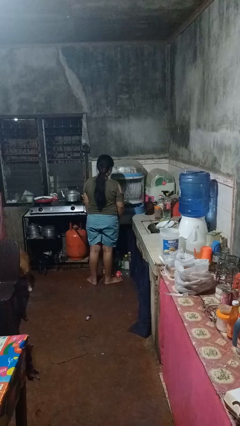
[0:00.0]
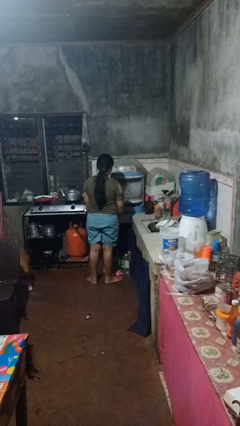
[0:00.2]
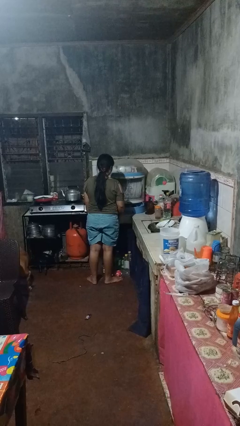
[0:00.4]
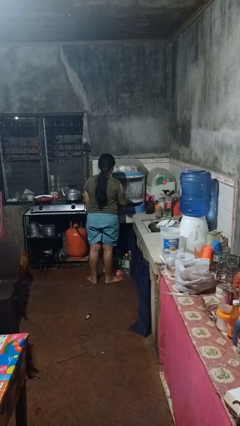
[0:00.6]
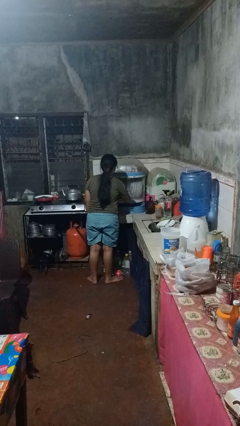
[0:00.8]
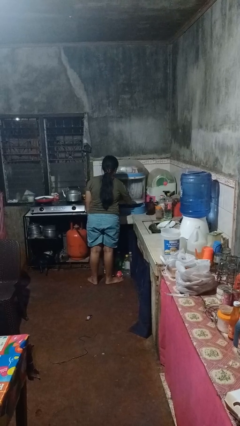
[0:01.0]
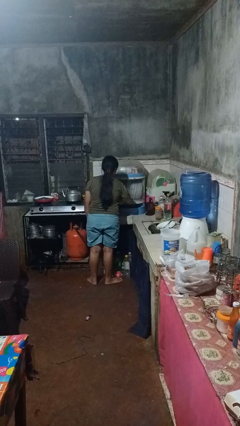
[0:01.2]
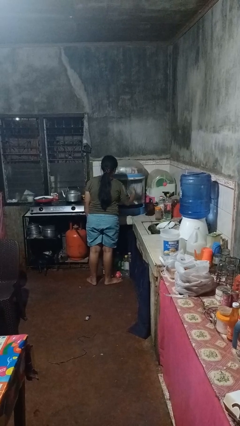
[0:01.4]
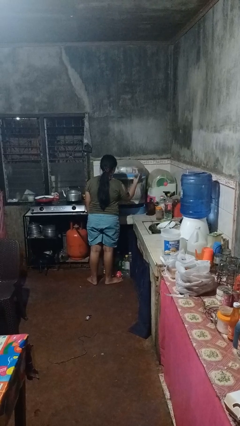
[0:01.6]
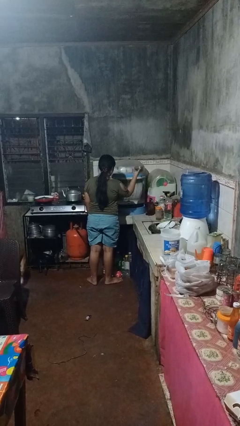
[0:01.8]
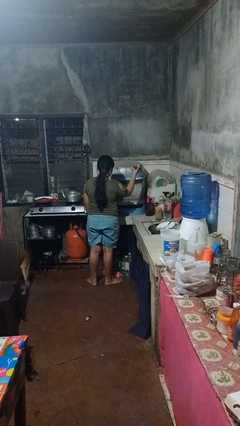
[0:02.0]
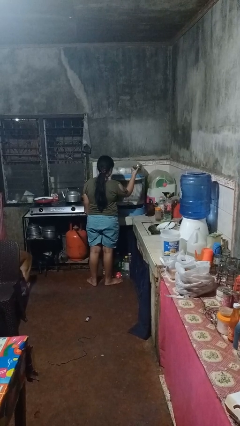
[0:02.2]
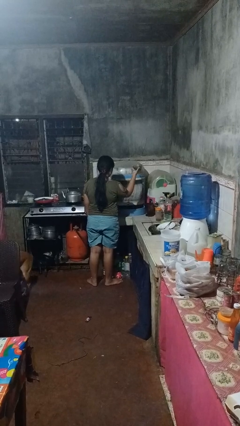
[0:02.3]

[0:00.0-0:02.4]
person takes object from kitchen drawer

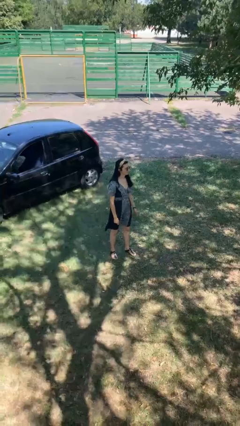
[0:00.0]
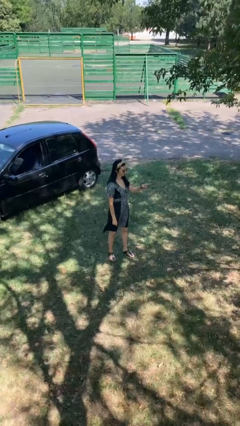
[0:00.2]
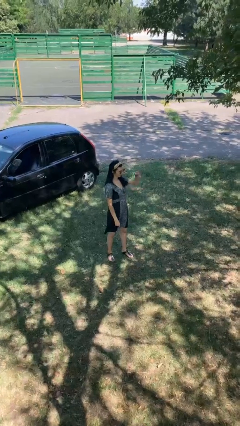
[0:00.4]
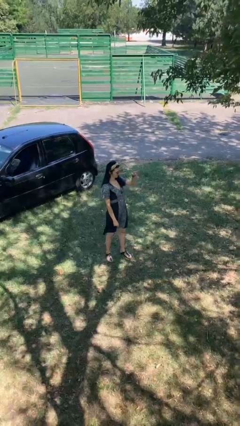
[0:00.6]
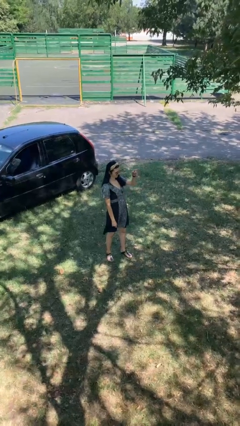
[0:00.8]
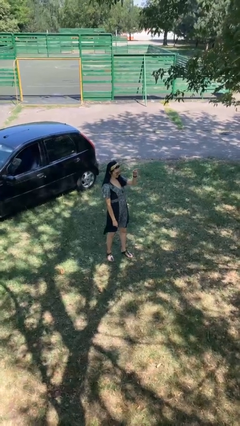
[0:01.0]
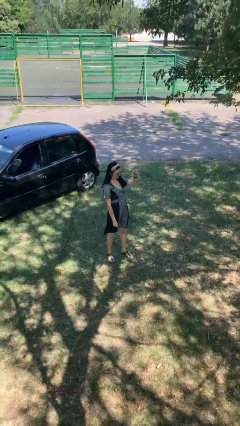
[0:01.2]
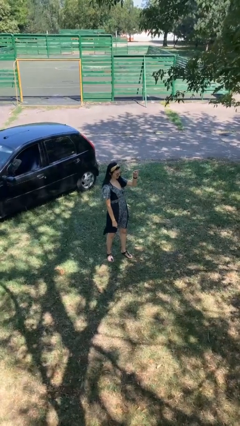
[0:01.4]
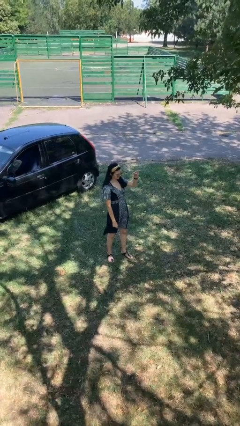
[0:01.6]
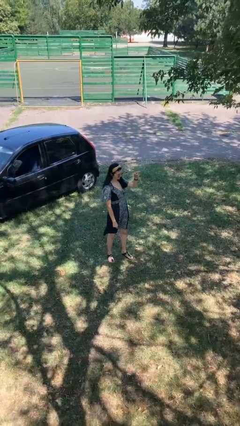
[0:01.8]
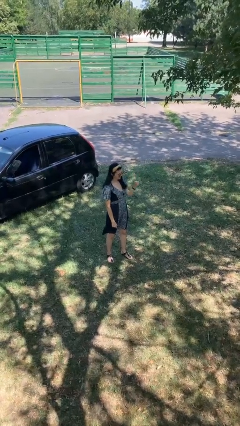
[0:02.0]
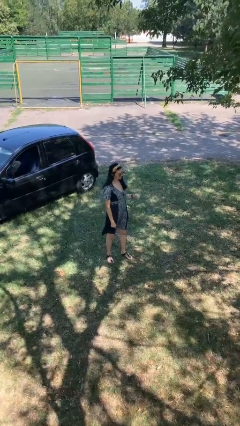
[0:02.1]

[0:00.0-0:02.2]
person points at person

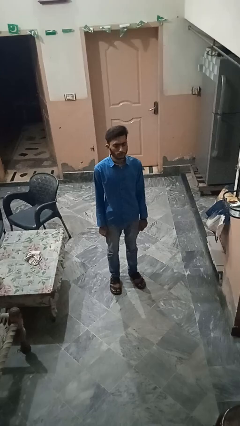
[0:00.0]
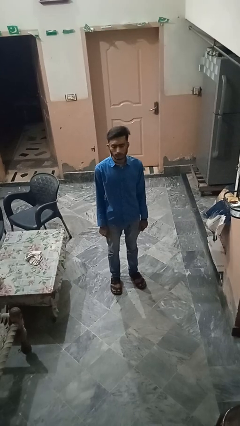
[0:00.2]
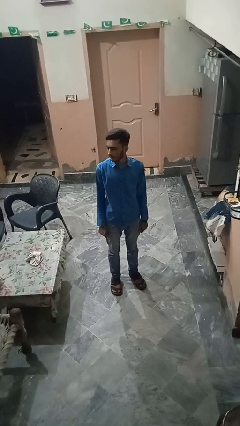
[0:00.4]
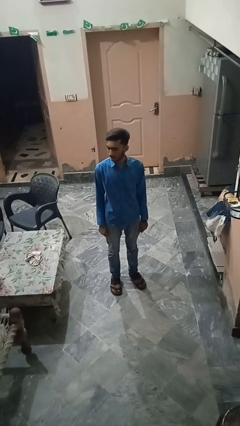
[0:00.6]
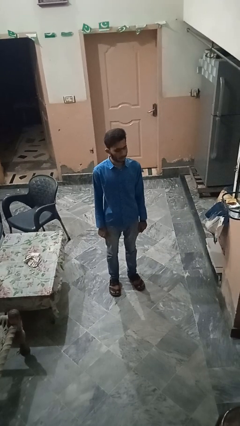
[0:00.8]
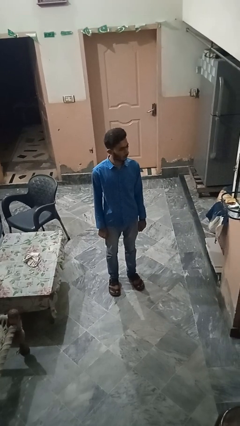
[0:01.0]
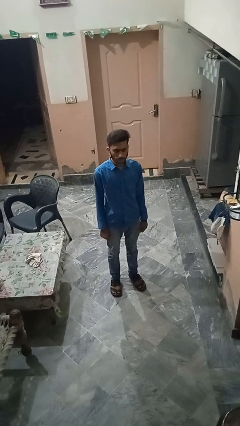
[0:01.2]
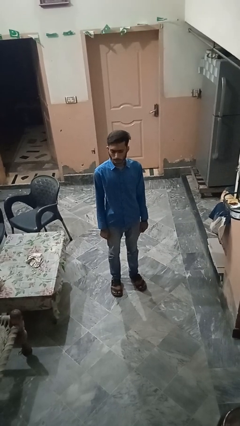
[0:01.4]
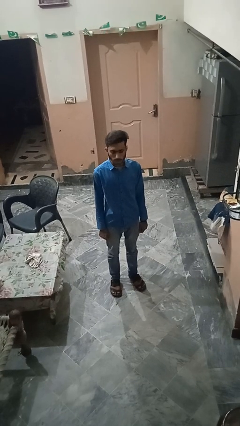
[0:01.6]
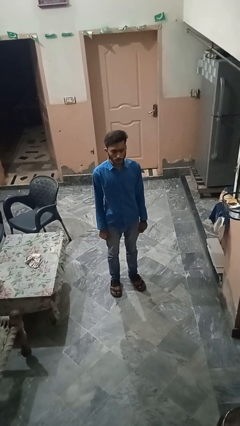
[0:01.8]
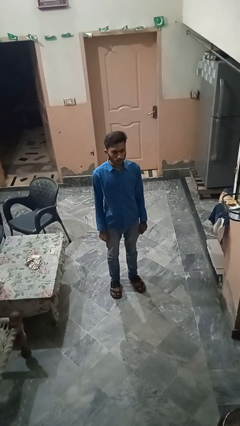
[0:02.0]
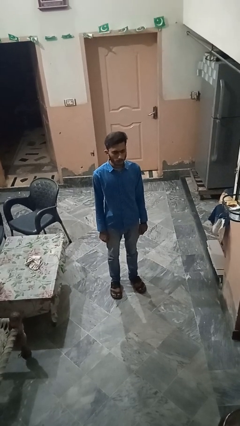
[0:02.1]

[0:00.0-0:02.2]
person shakes head

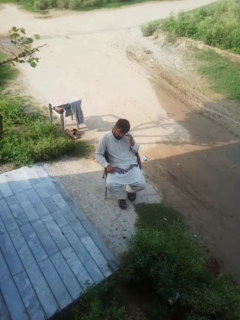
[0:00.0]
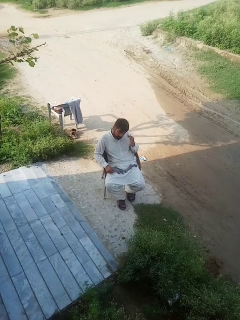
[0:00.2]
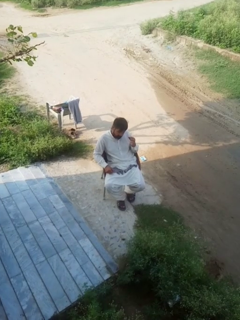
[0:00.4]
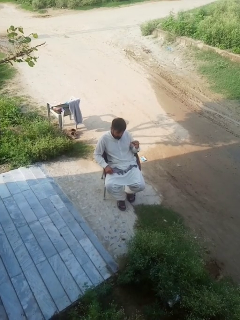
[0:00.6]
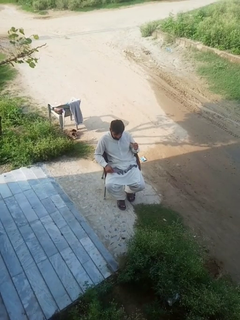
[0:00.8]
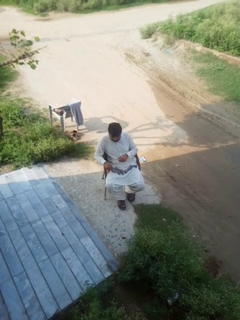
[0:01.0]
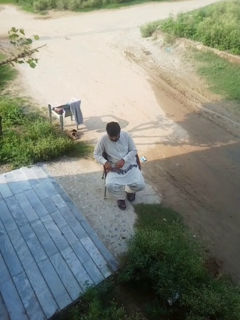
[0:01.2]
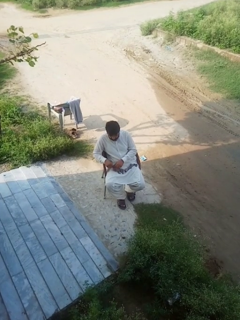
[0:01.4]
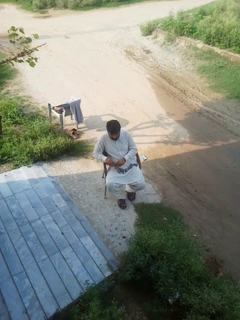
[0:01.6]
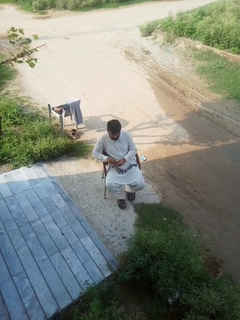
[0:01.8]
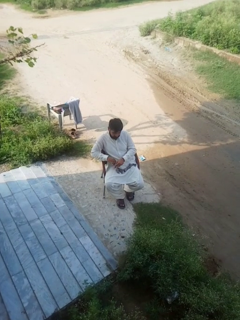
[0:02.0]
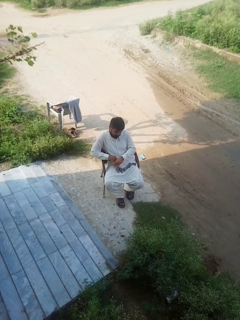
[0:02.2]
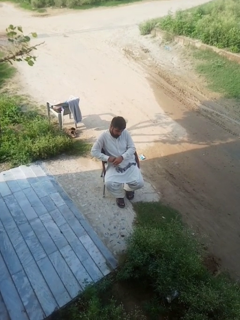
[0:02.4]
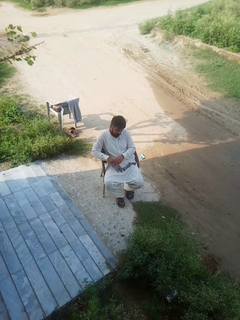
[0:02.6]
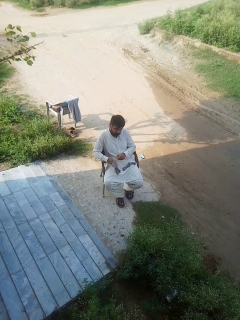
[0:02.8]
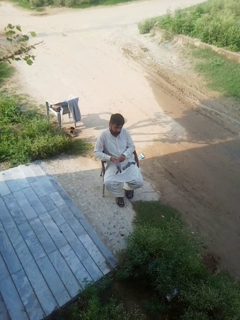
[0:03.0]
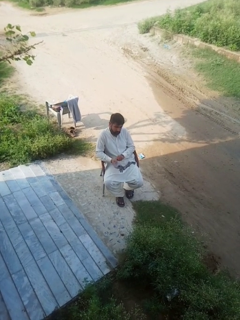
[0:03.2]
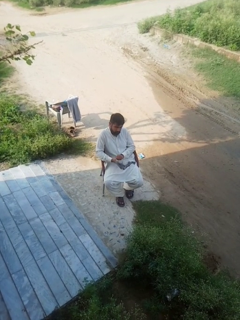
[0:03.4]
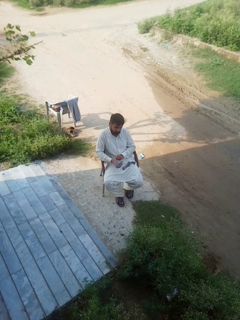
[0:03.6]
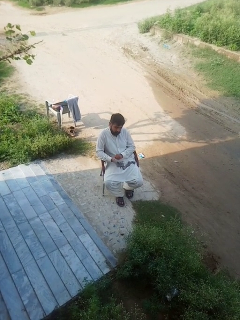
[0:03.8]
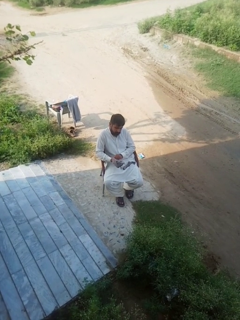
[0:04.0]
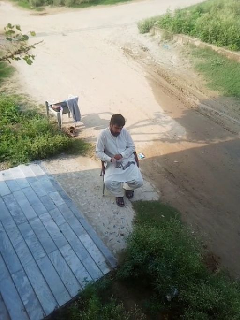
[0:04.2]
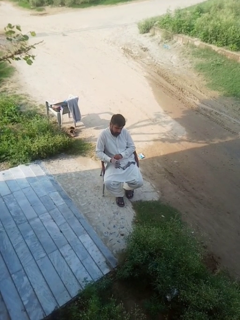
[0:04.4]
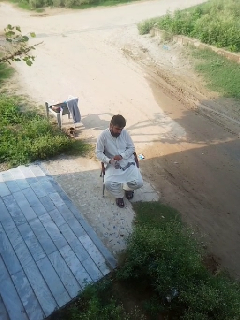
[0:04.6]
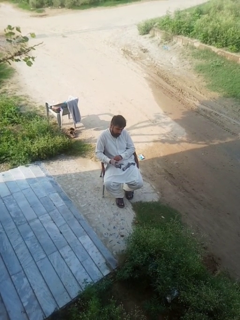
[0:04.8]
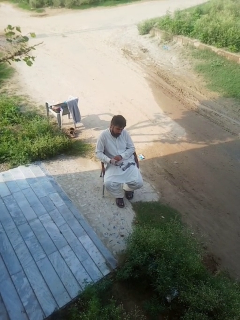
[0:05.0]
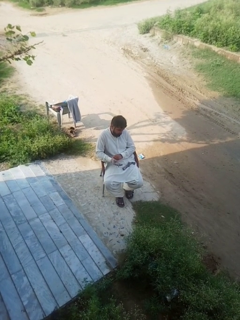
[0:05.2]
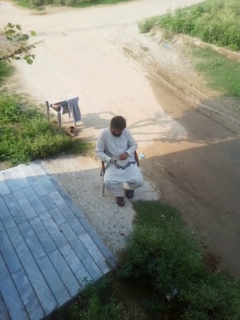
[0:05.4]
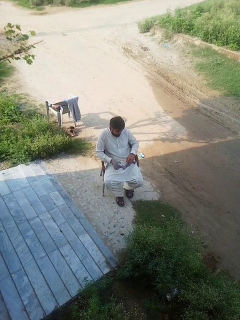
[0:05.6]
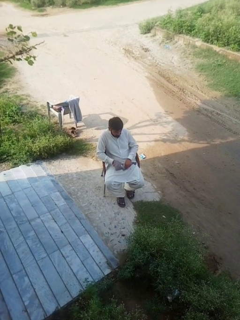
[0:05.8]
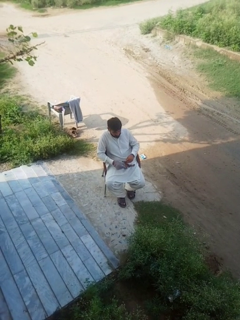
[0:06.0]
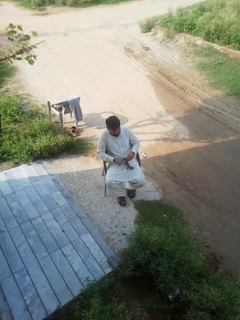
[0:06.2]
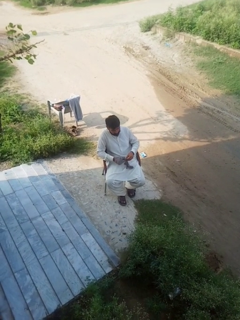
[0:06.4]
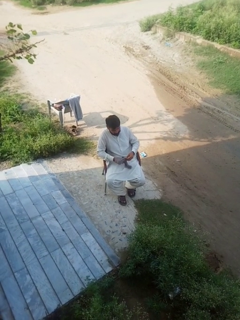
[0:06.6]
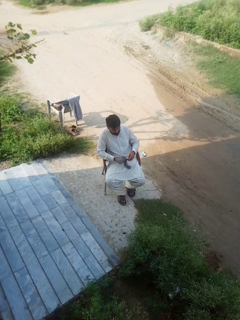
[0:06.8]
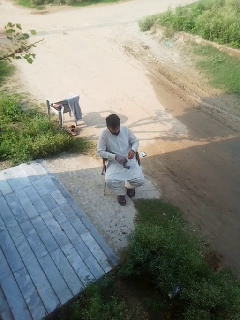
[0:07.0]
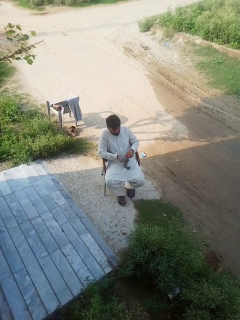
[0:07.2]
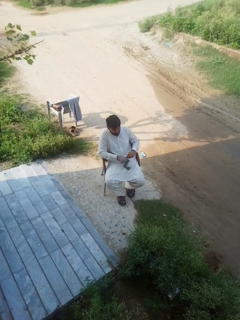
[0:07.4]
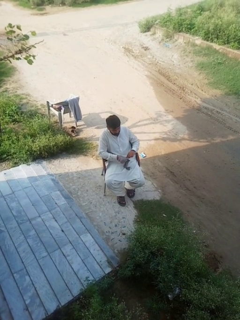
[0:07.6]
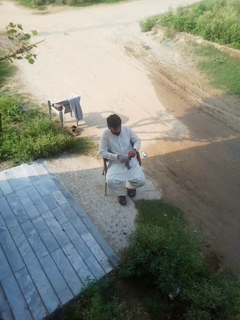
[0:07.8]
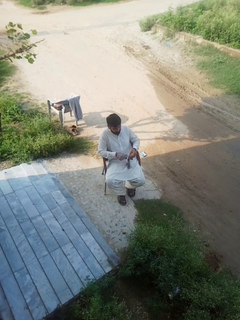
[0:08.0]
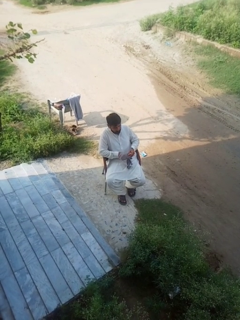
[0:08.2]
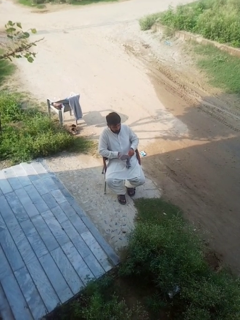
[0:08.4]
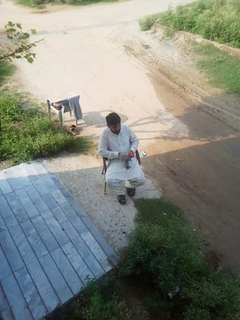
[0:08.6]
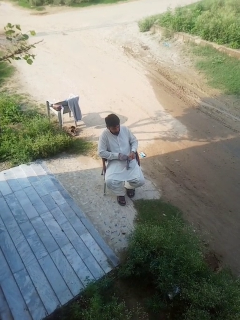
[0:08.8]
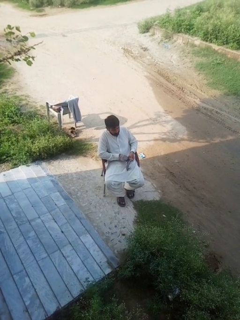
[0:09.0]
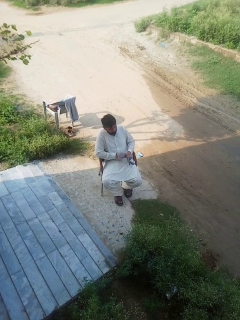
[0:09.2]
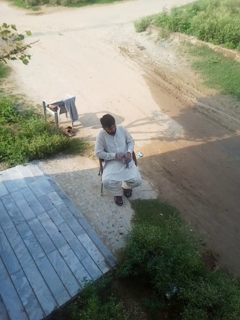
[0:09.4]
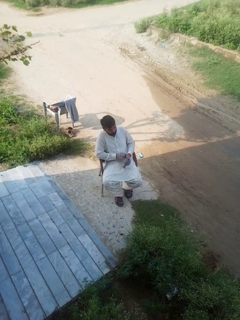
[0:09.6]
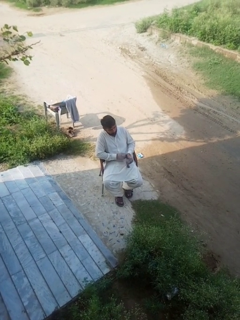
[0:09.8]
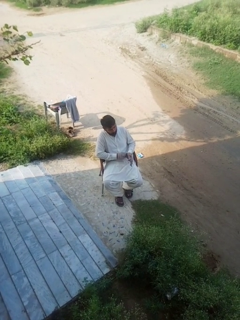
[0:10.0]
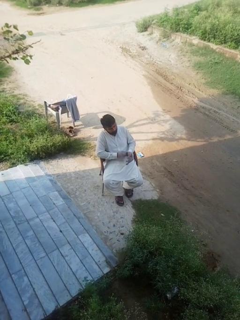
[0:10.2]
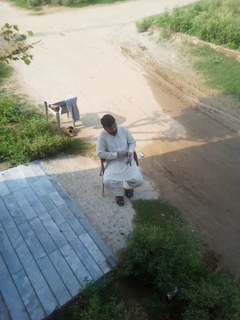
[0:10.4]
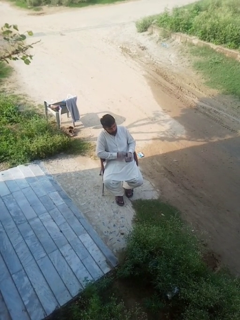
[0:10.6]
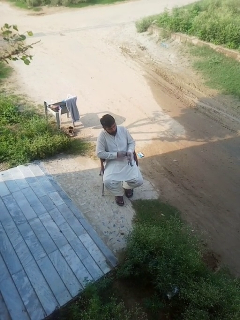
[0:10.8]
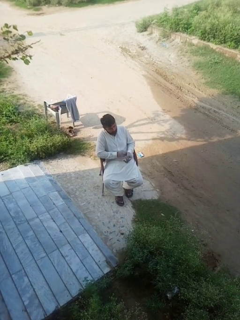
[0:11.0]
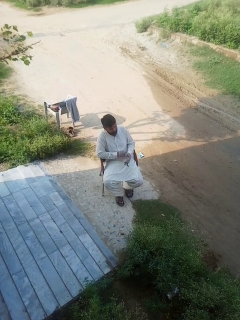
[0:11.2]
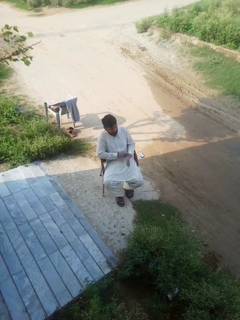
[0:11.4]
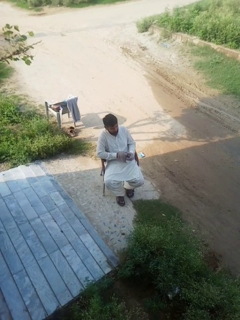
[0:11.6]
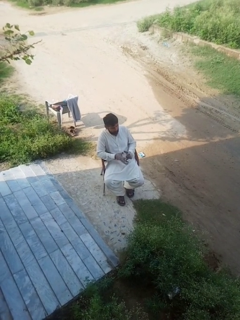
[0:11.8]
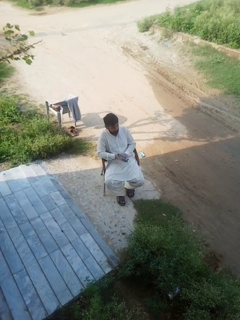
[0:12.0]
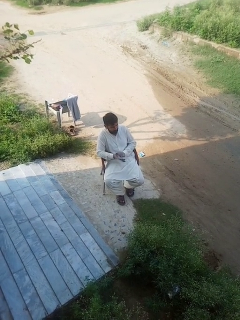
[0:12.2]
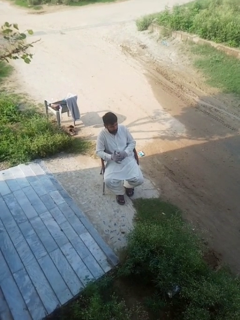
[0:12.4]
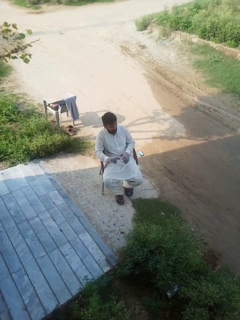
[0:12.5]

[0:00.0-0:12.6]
person puts on gloves
